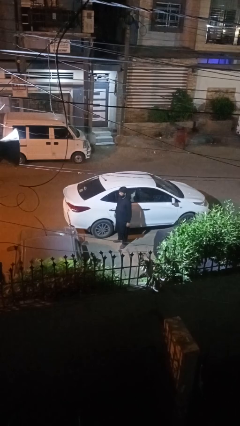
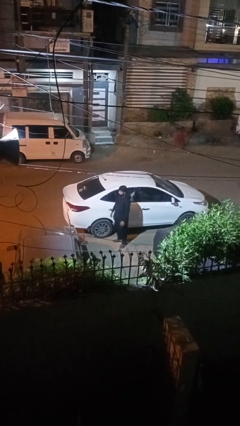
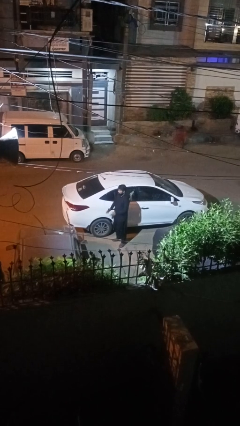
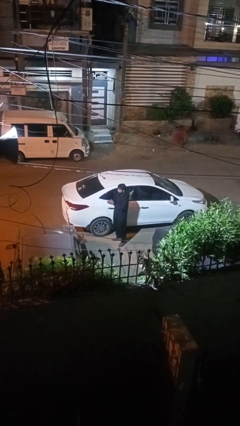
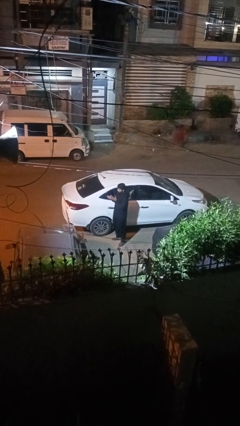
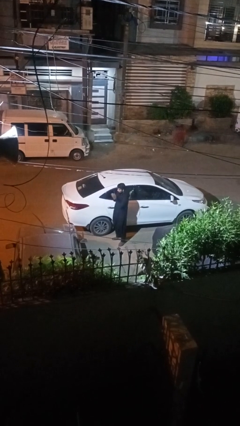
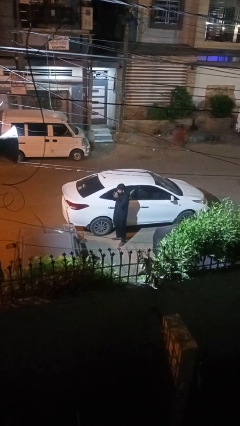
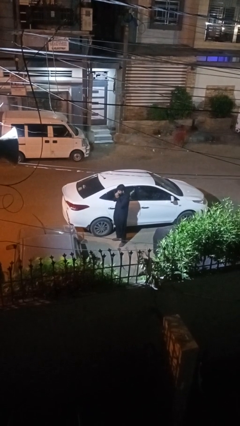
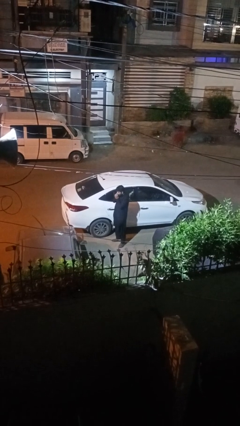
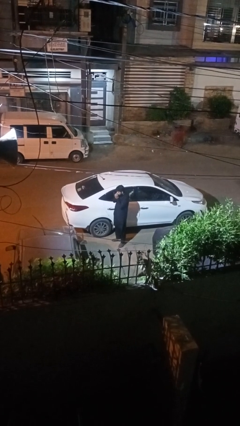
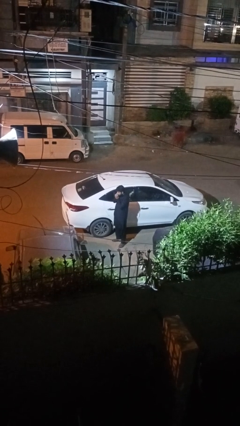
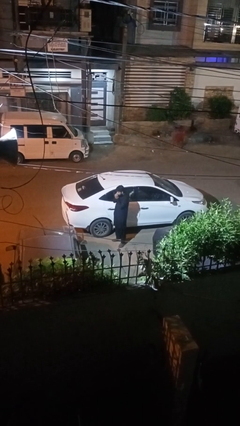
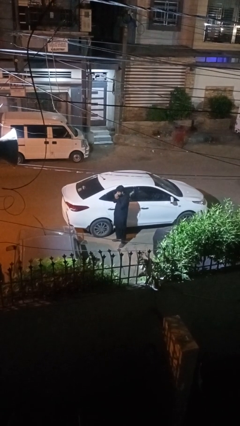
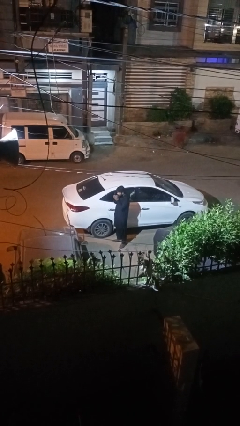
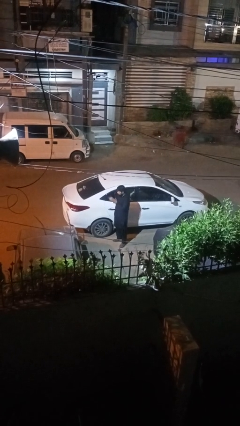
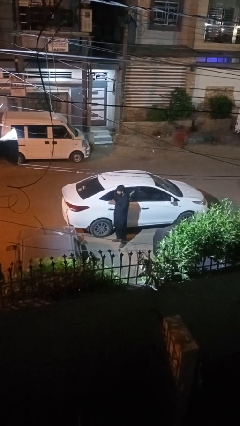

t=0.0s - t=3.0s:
person blows into hands

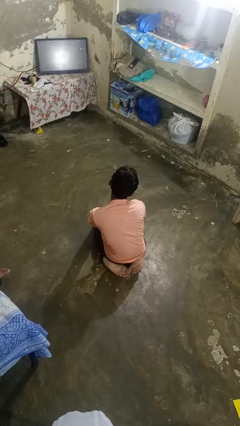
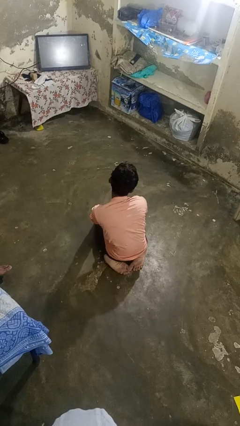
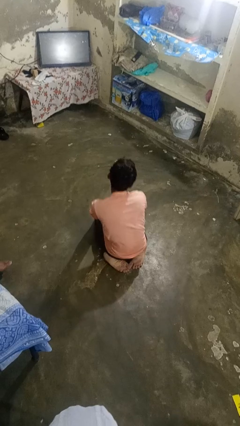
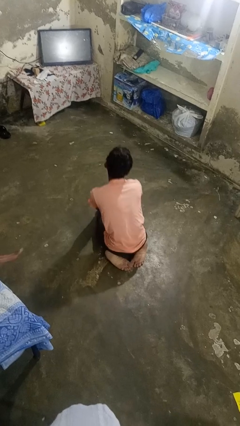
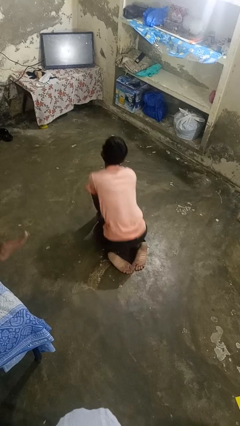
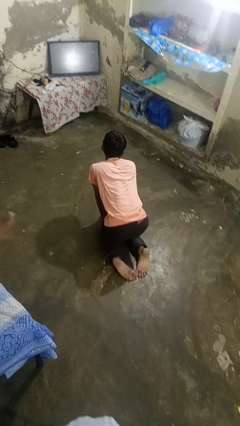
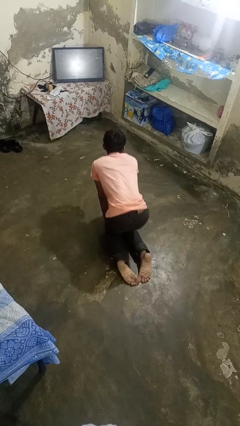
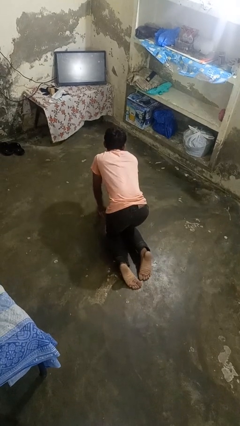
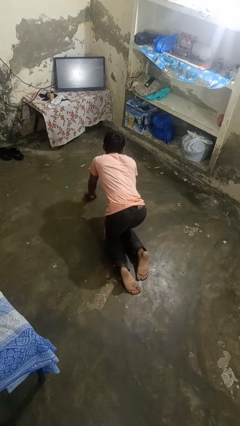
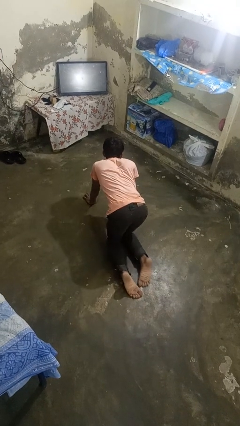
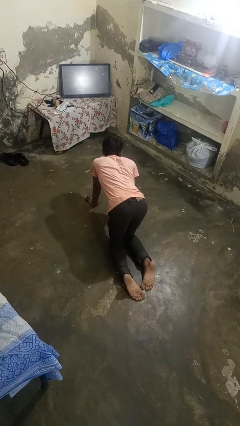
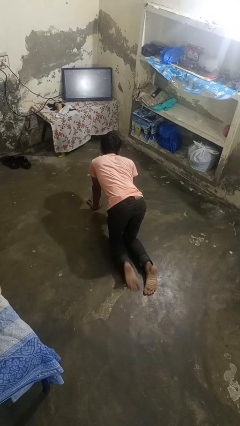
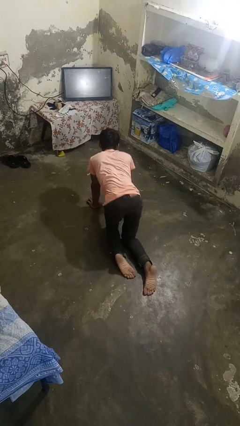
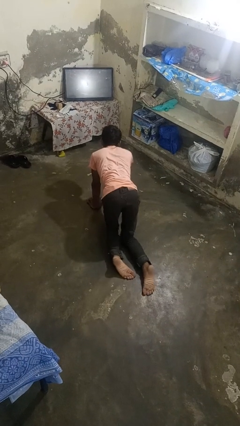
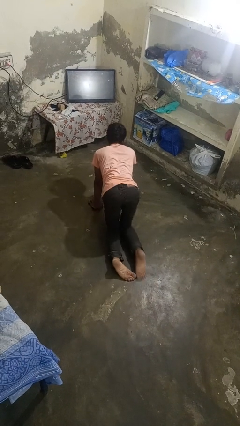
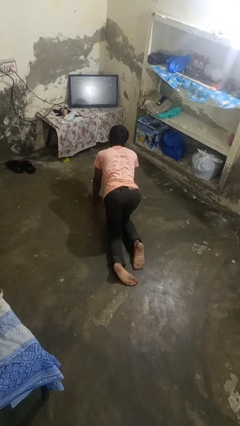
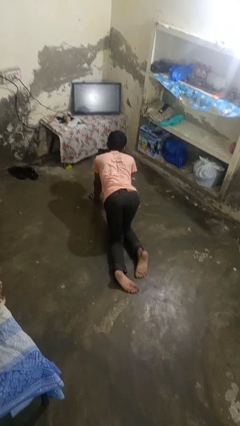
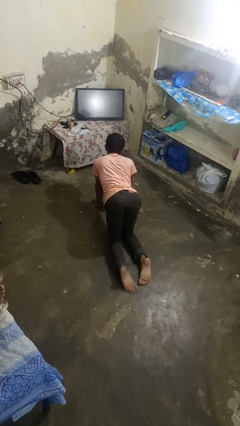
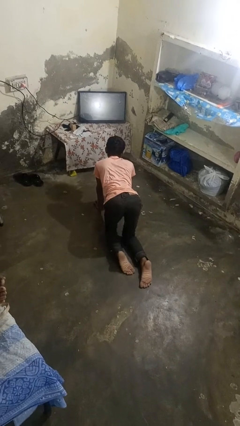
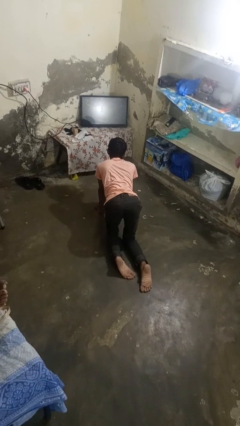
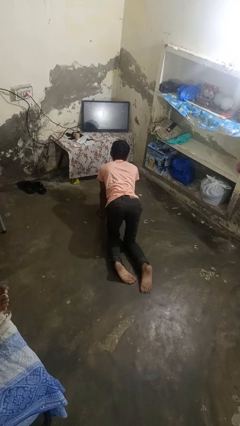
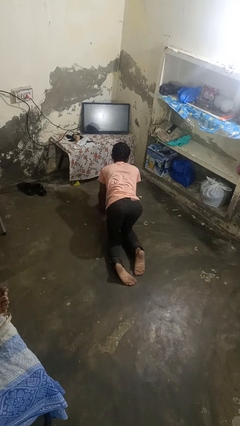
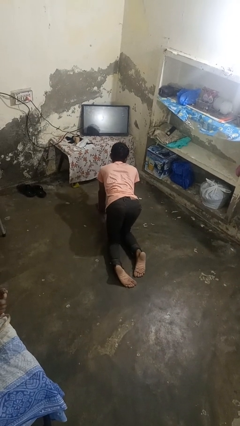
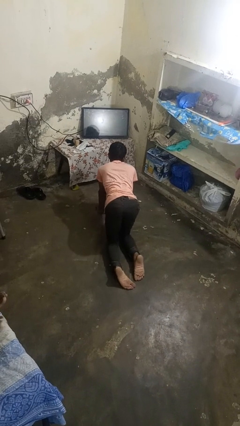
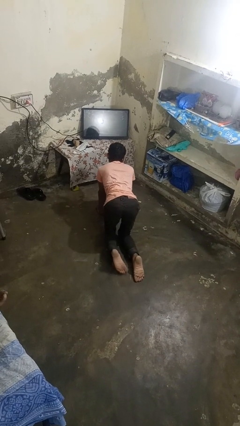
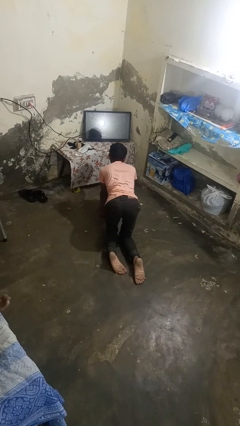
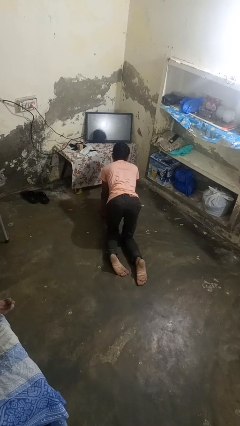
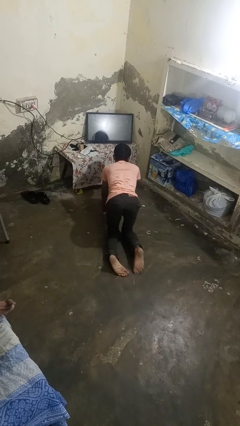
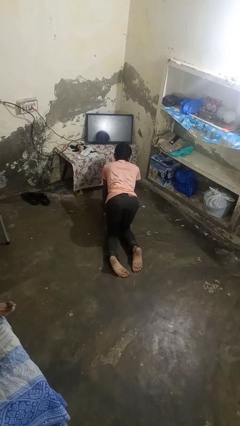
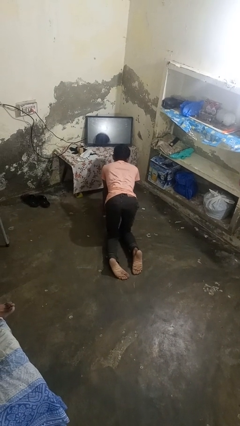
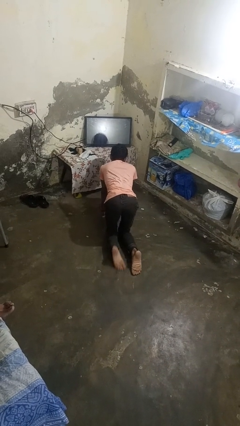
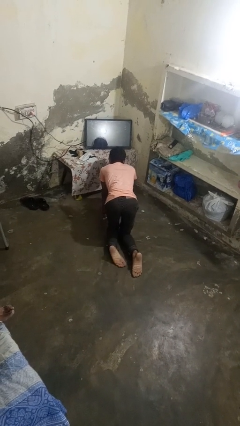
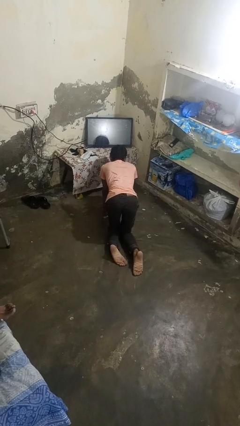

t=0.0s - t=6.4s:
person crawls

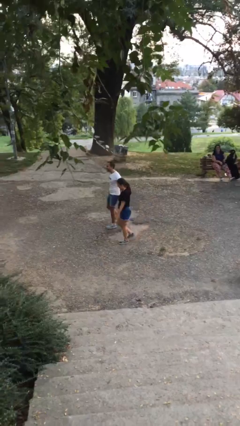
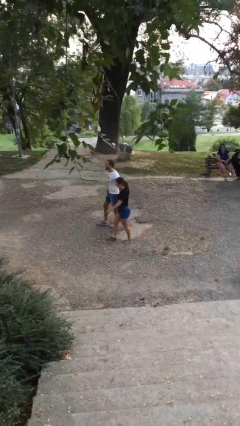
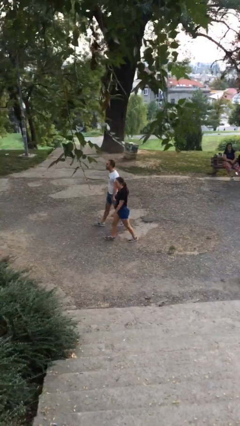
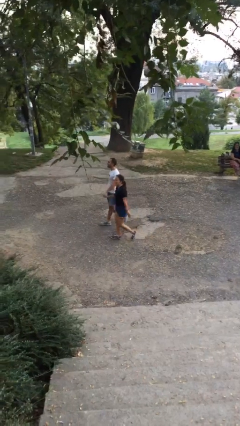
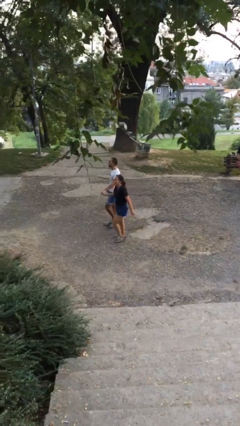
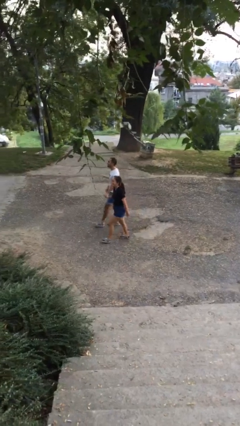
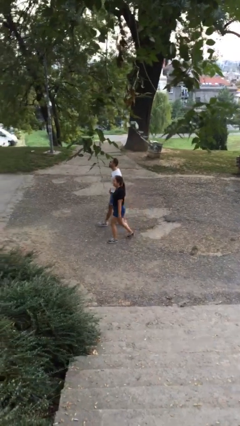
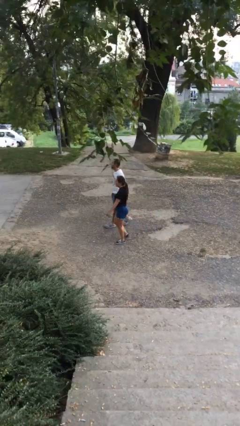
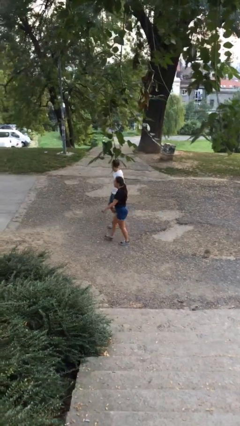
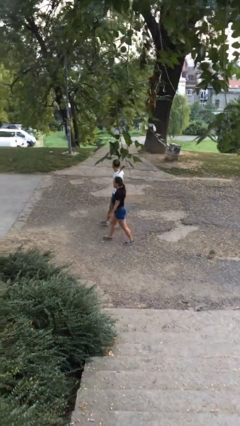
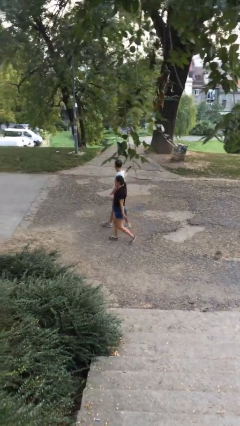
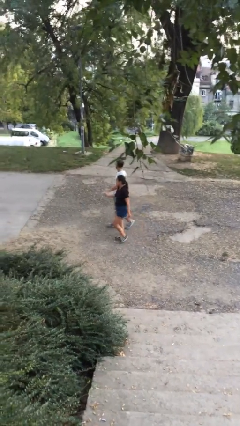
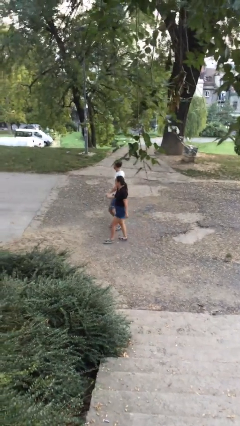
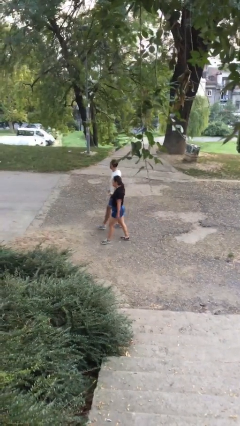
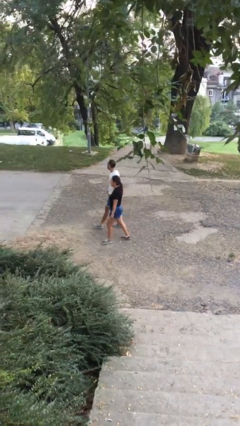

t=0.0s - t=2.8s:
person holds hand

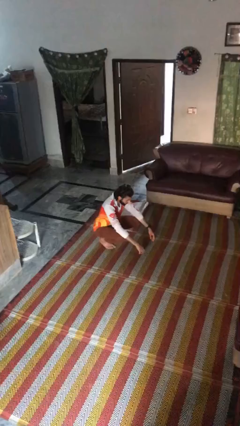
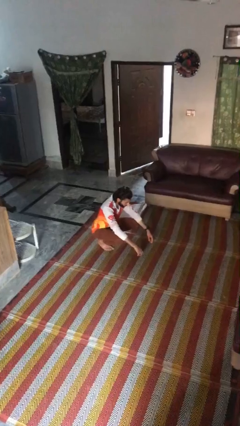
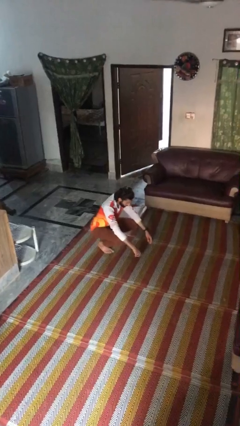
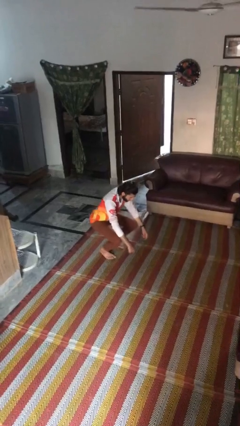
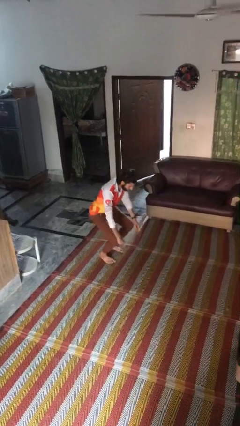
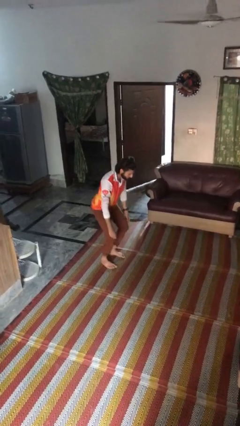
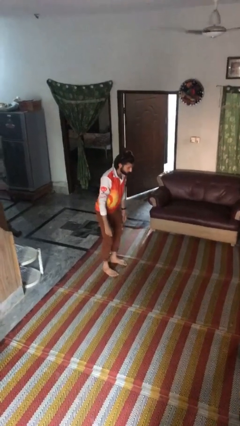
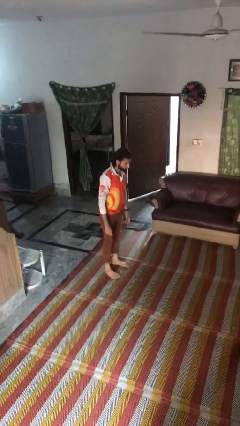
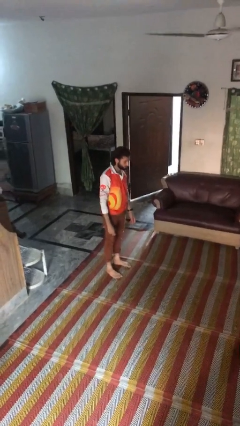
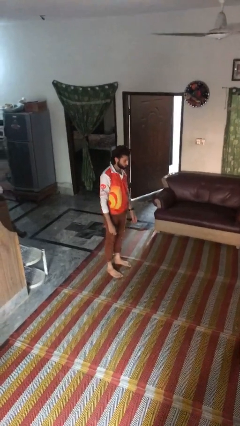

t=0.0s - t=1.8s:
person stands up

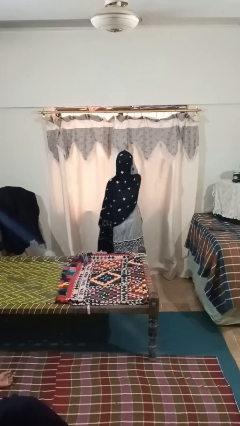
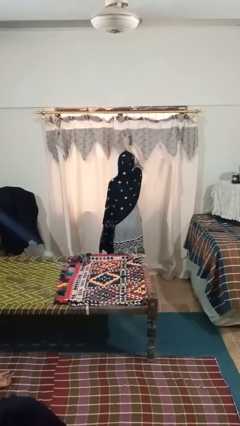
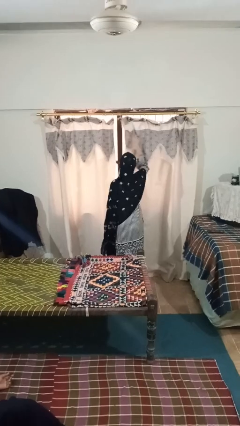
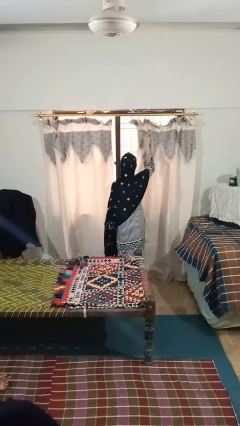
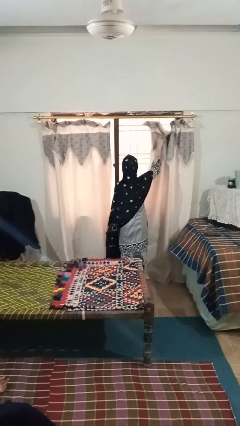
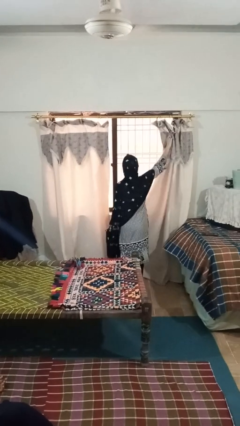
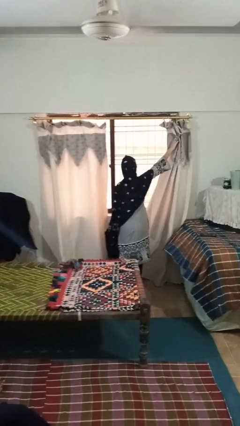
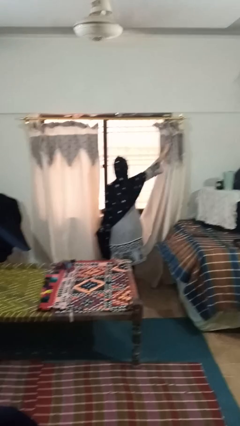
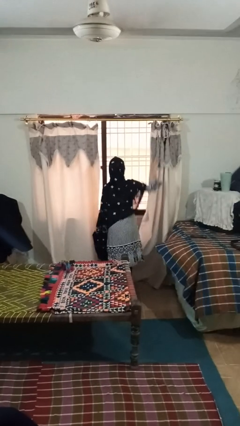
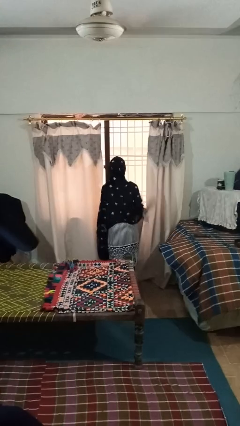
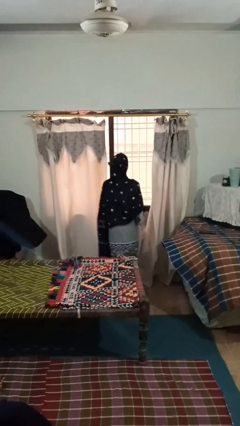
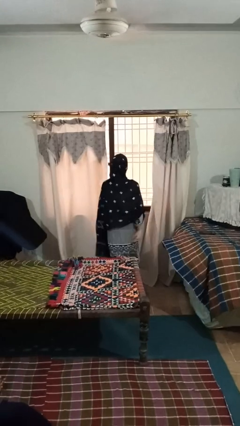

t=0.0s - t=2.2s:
person opens curtains

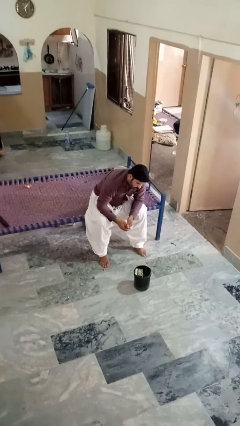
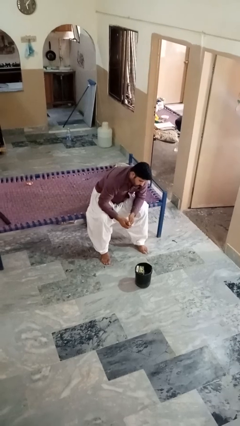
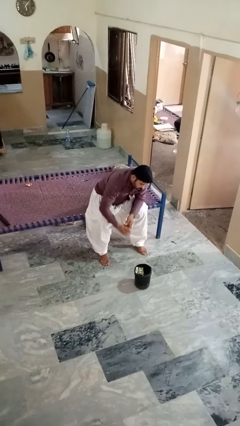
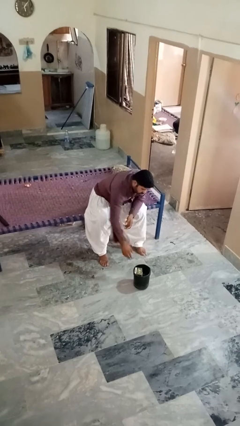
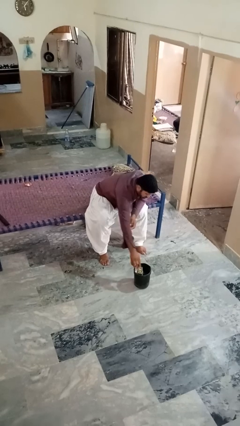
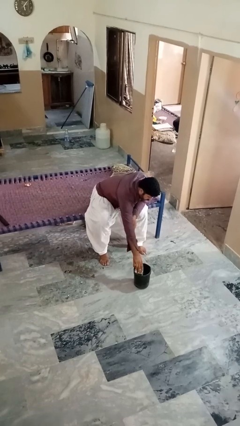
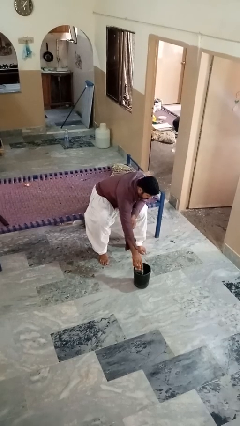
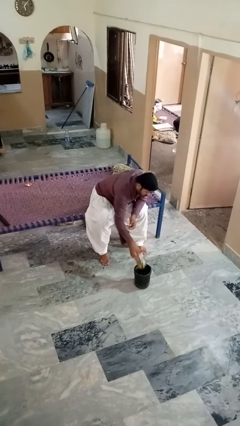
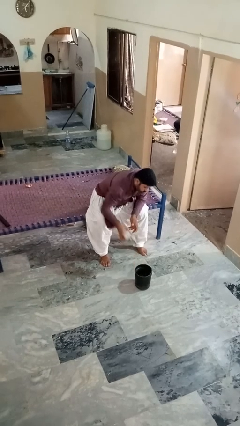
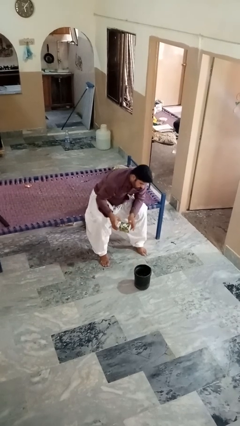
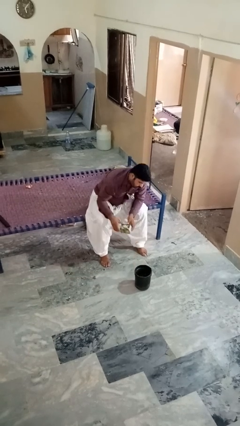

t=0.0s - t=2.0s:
person takes object from basket
